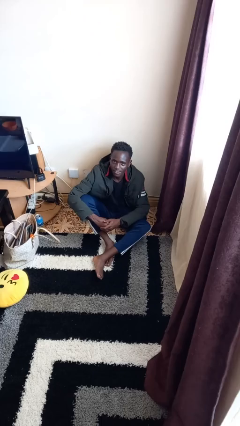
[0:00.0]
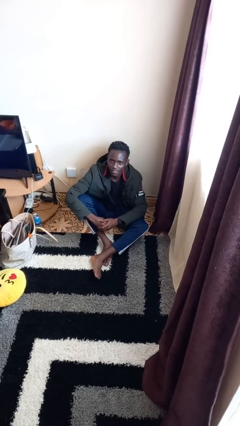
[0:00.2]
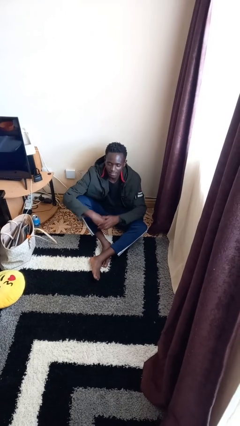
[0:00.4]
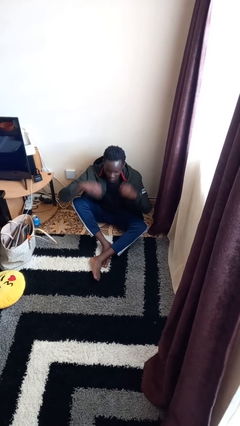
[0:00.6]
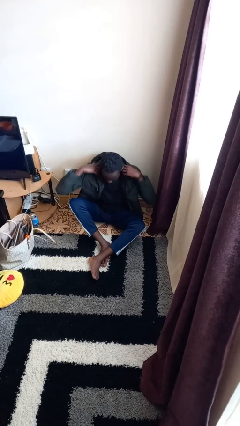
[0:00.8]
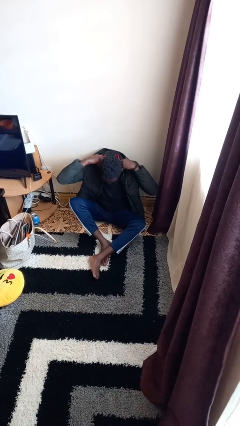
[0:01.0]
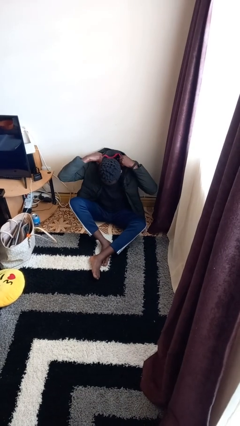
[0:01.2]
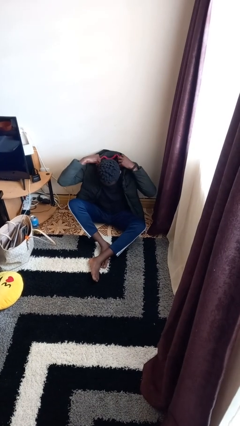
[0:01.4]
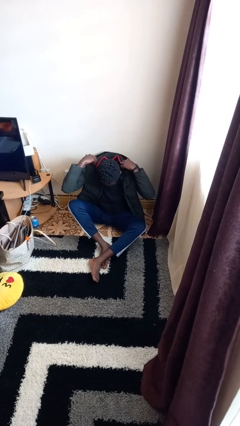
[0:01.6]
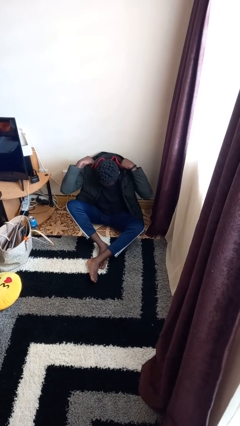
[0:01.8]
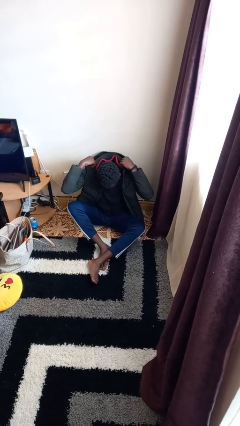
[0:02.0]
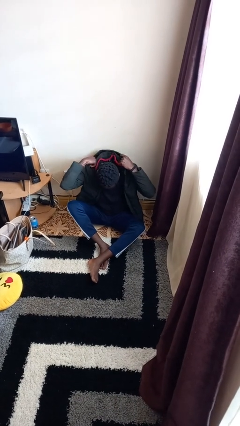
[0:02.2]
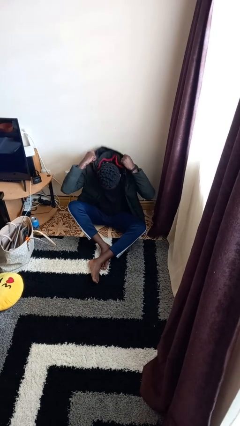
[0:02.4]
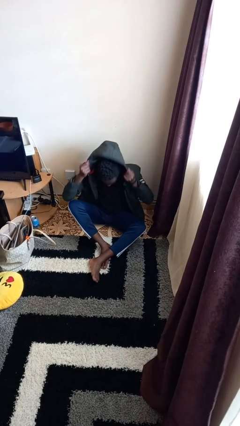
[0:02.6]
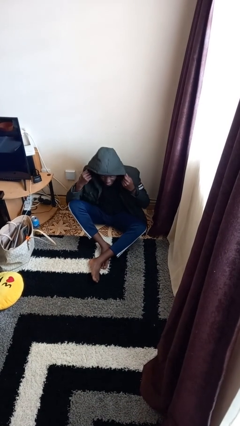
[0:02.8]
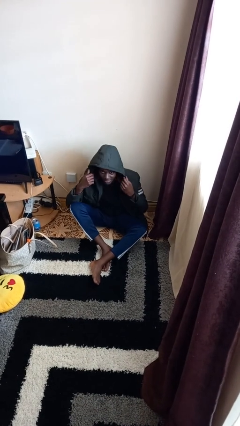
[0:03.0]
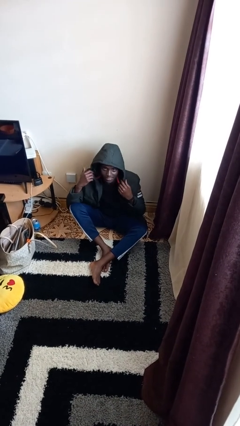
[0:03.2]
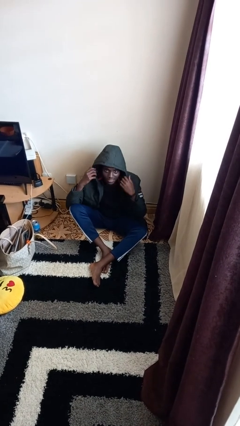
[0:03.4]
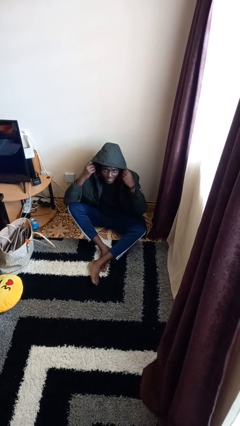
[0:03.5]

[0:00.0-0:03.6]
person puts on hoodie

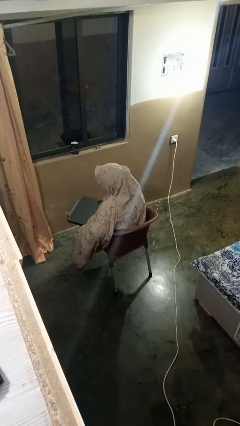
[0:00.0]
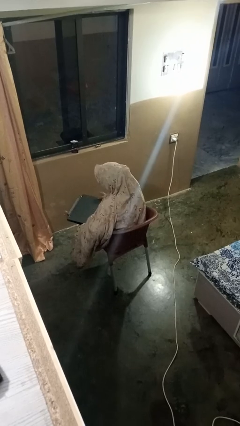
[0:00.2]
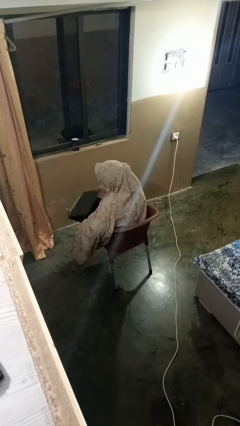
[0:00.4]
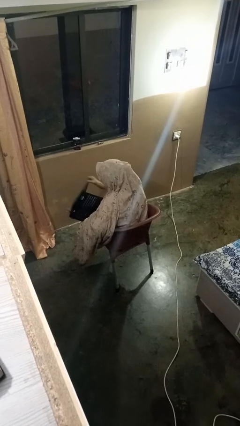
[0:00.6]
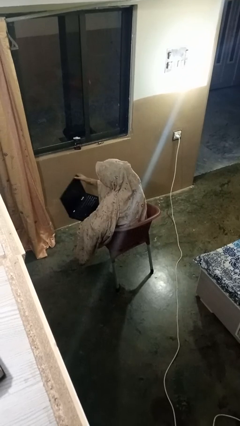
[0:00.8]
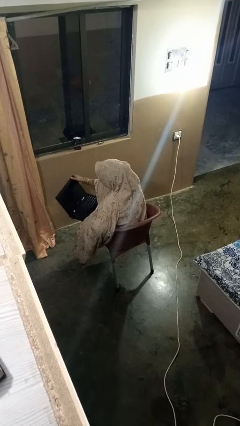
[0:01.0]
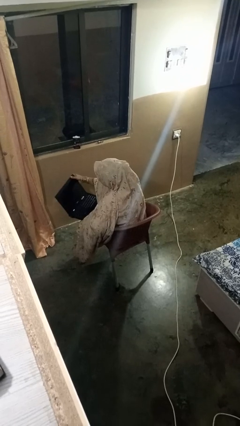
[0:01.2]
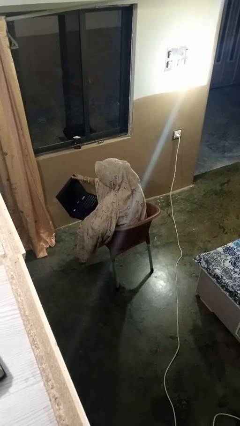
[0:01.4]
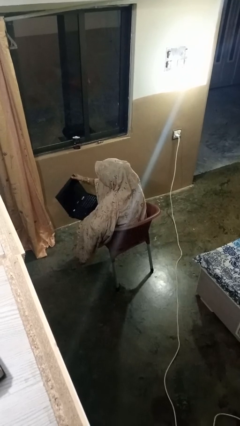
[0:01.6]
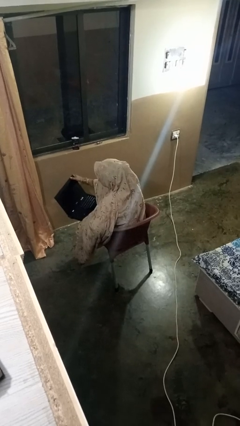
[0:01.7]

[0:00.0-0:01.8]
person opens laptop

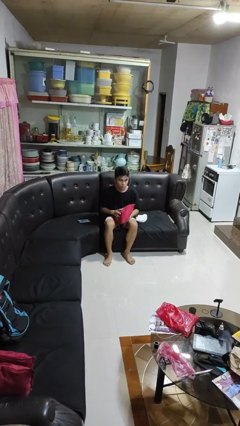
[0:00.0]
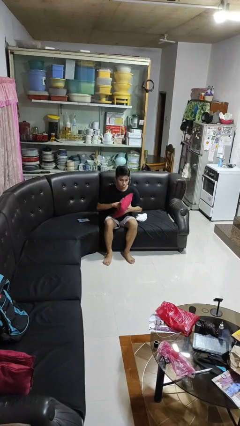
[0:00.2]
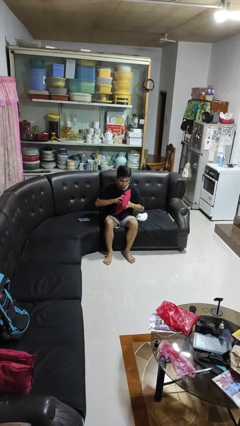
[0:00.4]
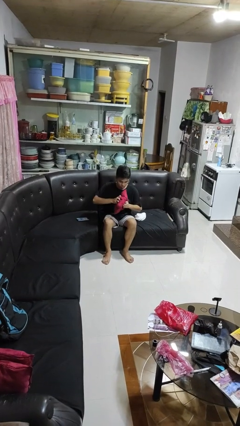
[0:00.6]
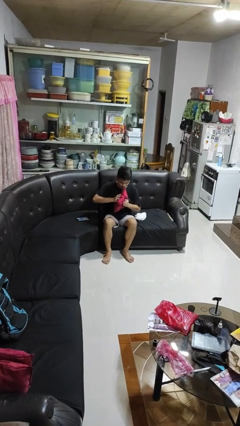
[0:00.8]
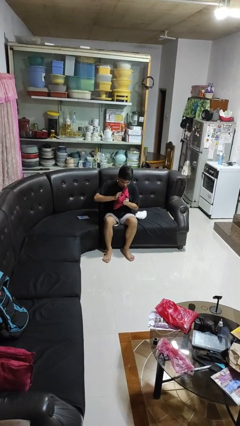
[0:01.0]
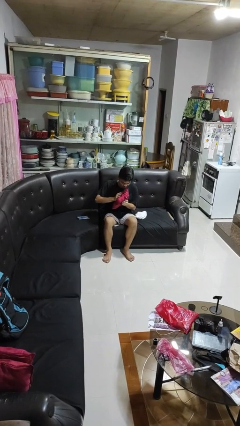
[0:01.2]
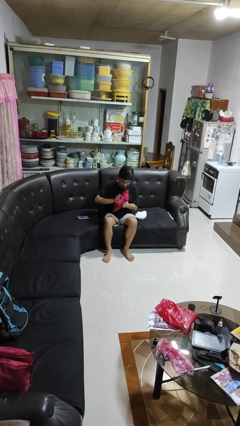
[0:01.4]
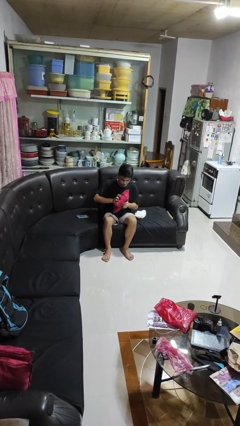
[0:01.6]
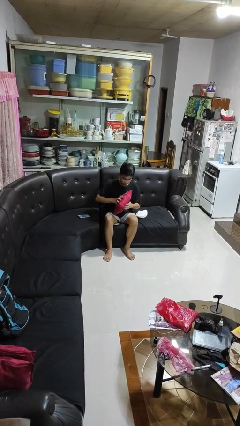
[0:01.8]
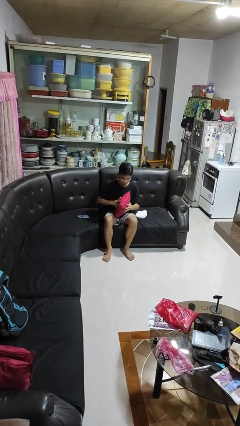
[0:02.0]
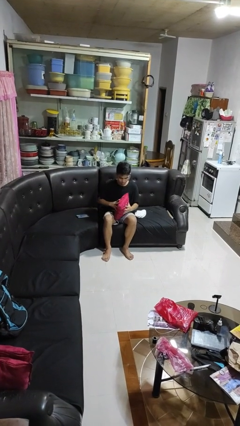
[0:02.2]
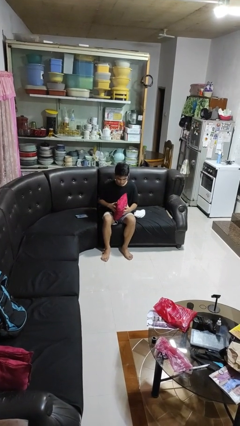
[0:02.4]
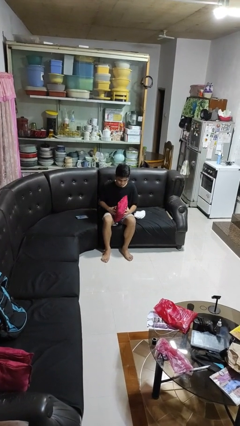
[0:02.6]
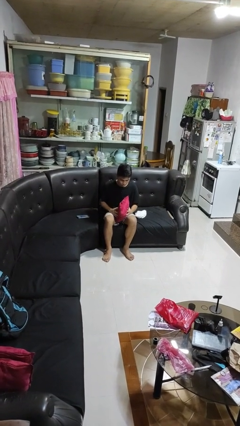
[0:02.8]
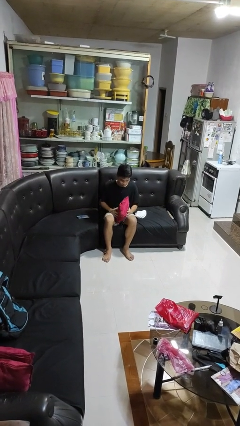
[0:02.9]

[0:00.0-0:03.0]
person squeezes object

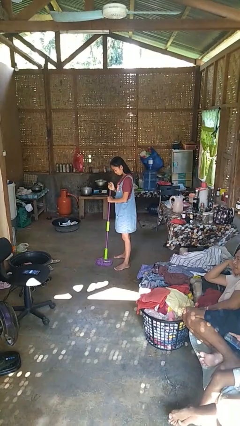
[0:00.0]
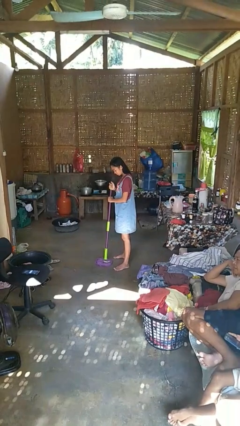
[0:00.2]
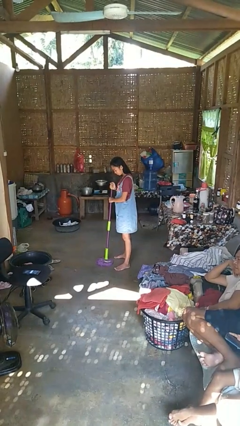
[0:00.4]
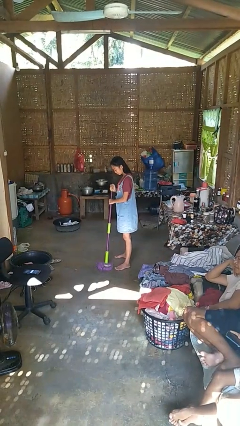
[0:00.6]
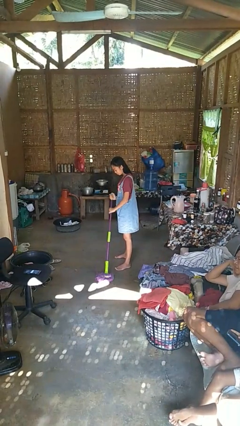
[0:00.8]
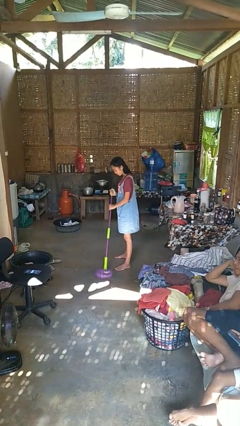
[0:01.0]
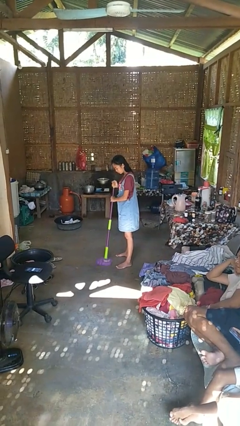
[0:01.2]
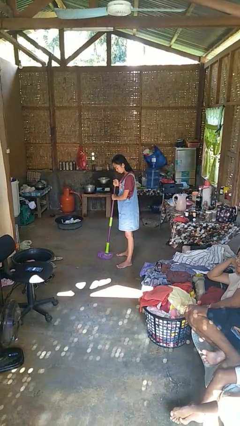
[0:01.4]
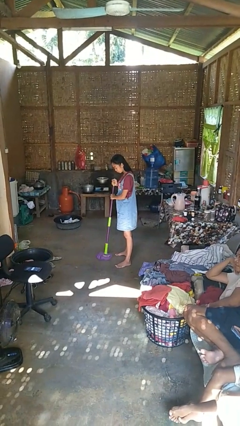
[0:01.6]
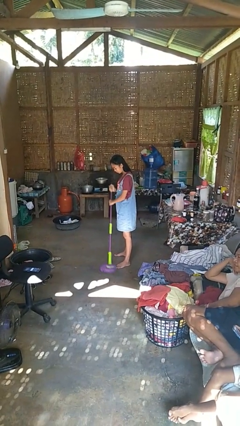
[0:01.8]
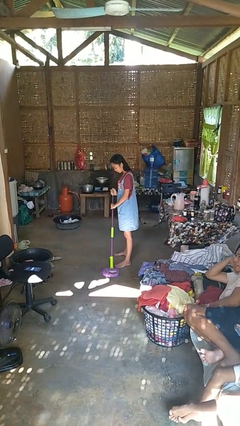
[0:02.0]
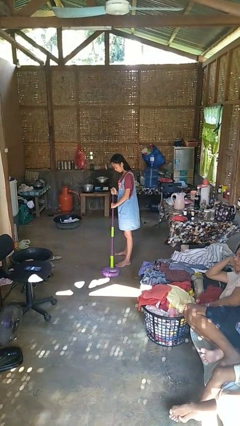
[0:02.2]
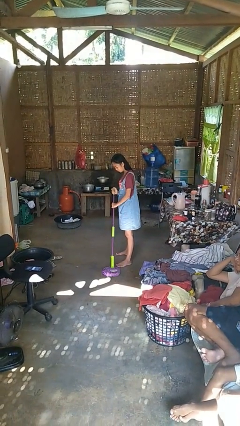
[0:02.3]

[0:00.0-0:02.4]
person mops

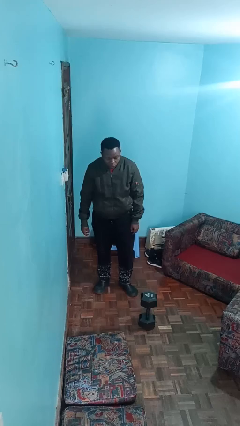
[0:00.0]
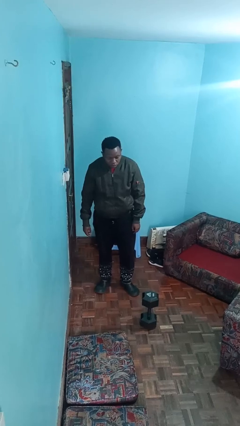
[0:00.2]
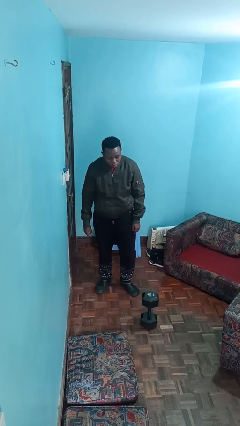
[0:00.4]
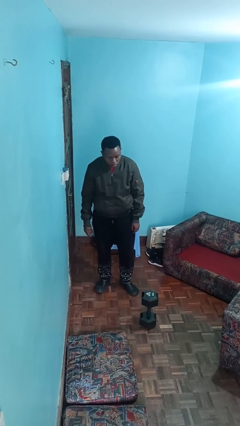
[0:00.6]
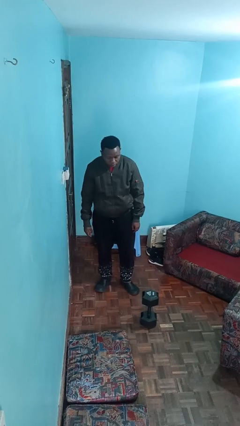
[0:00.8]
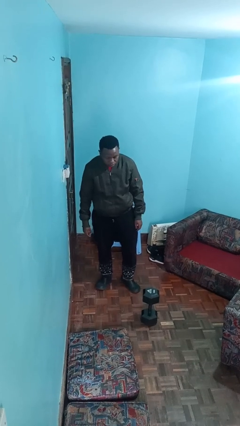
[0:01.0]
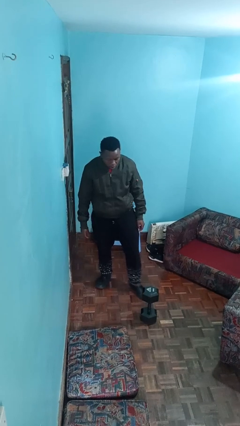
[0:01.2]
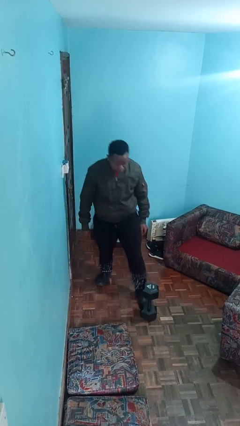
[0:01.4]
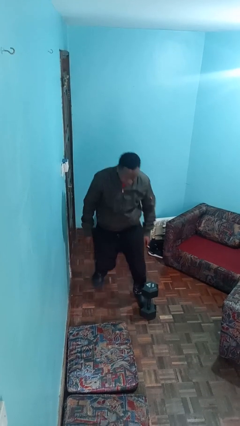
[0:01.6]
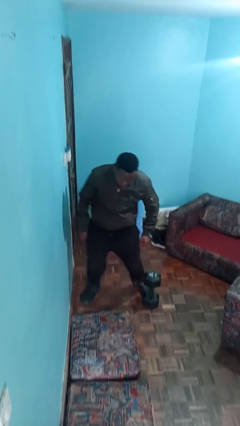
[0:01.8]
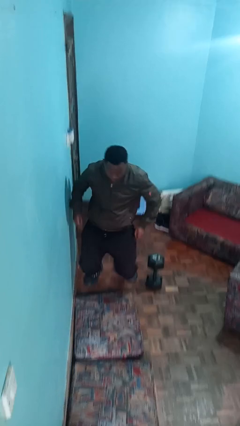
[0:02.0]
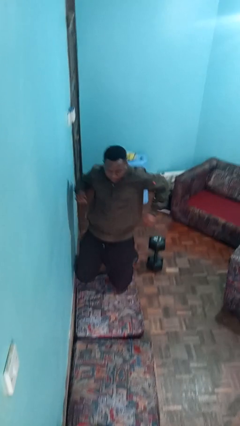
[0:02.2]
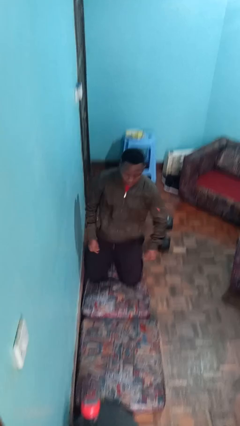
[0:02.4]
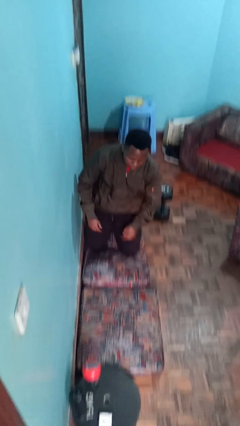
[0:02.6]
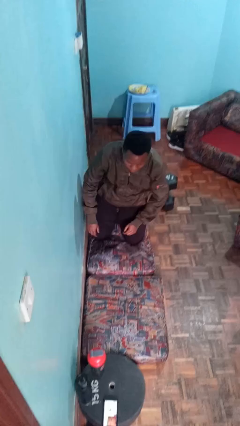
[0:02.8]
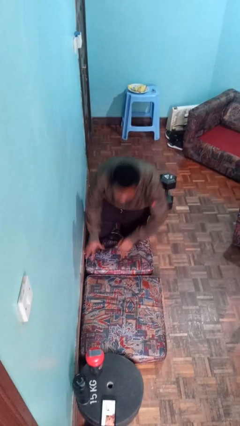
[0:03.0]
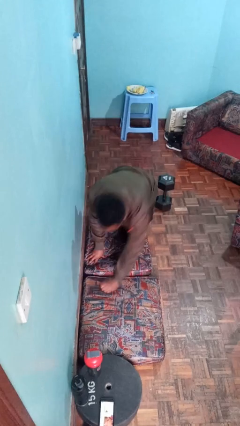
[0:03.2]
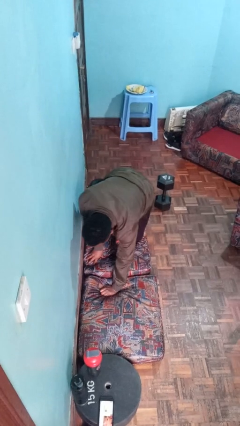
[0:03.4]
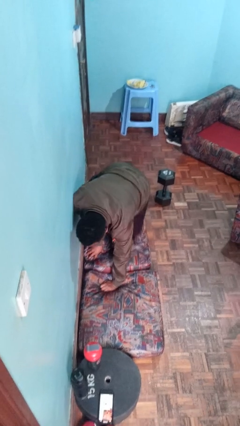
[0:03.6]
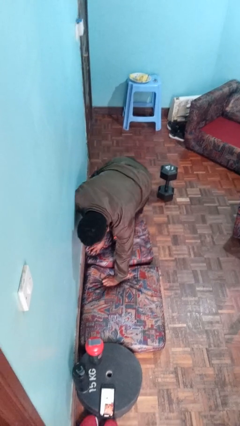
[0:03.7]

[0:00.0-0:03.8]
person trips on object on floor

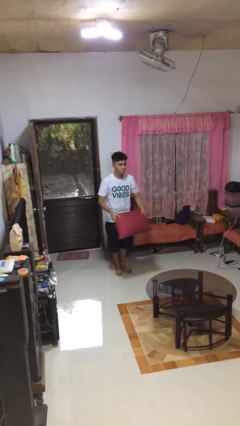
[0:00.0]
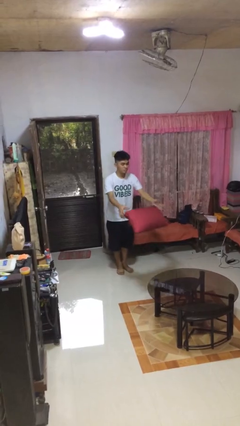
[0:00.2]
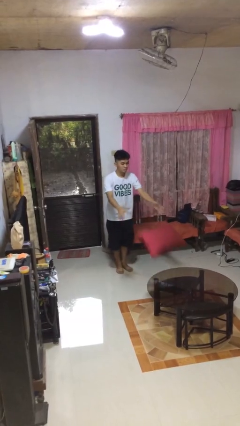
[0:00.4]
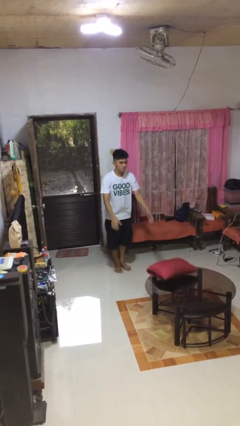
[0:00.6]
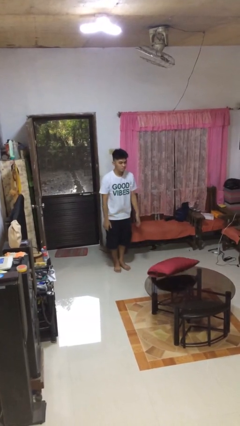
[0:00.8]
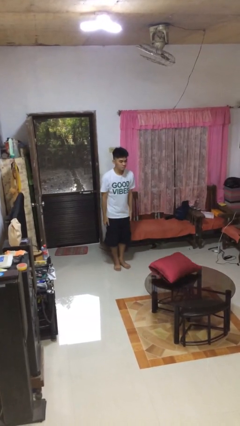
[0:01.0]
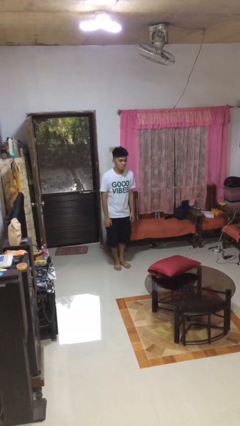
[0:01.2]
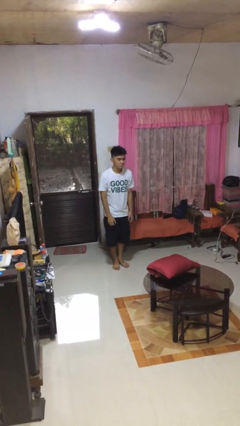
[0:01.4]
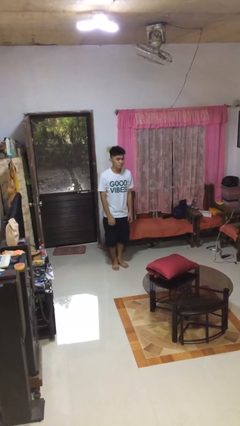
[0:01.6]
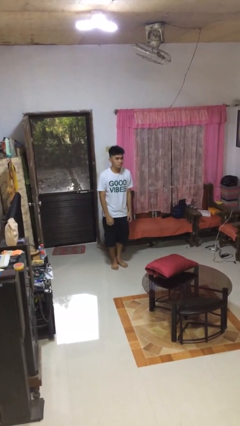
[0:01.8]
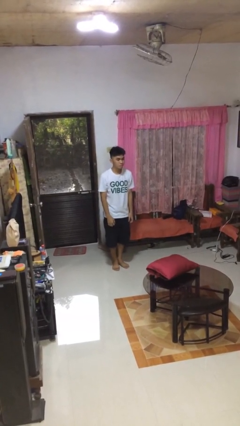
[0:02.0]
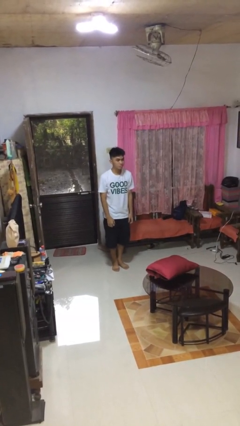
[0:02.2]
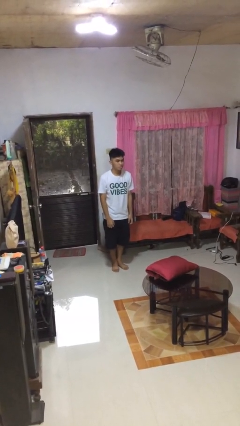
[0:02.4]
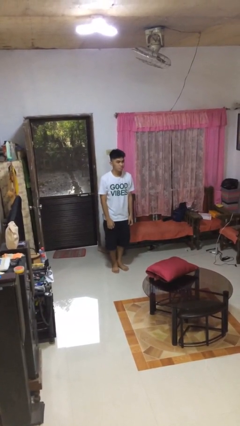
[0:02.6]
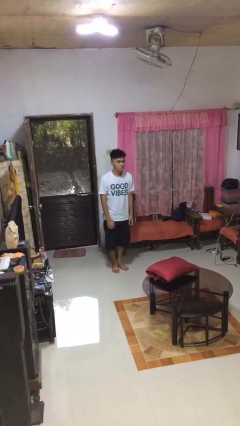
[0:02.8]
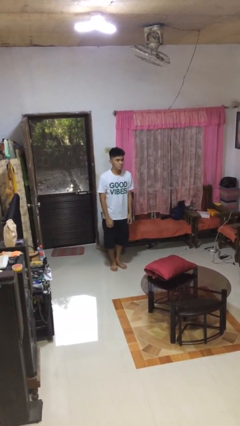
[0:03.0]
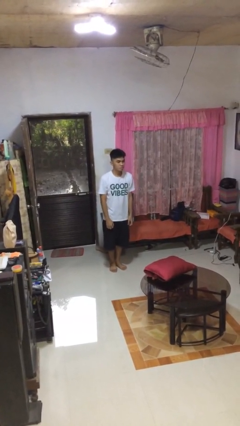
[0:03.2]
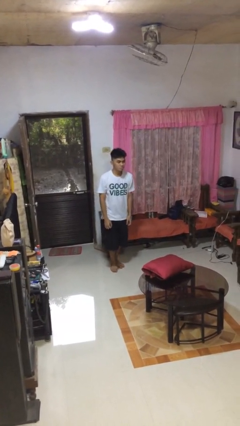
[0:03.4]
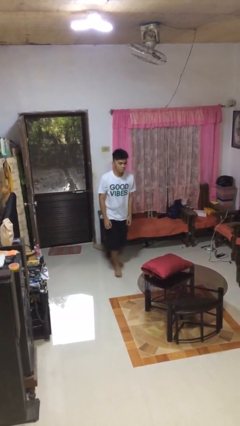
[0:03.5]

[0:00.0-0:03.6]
person throws object on table
